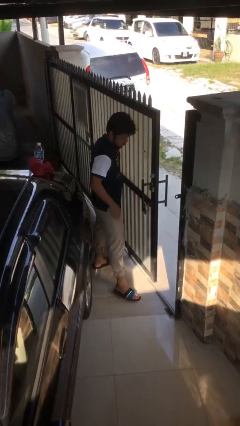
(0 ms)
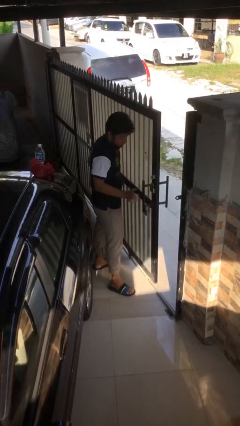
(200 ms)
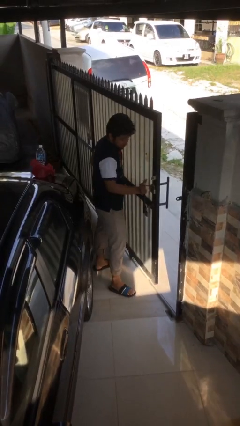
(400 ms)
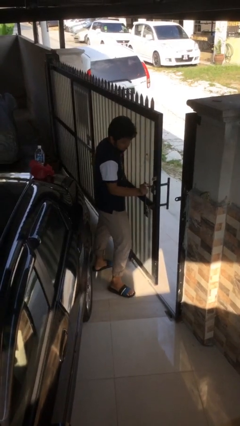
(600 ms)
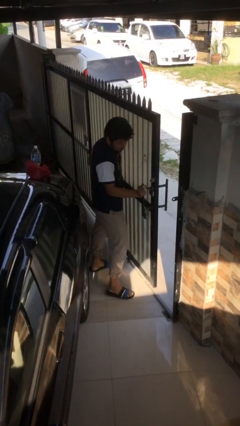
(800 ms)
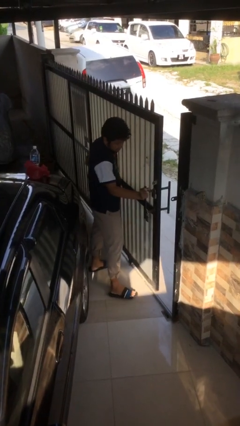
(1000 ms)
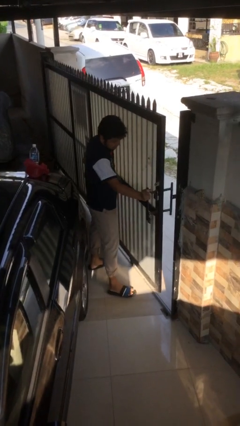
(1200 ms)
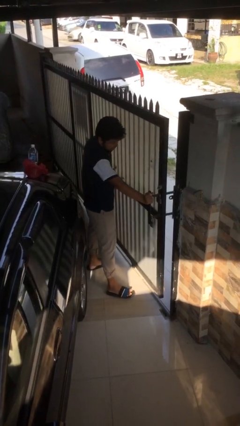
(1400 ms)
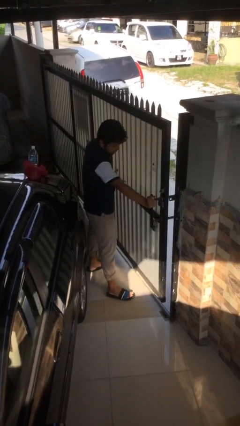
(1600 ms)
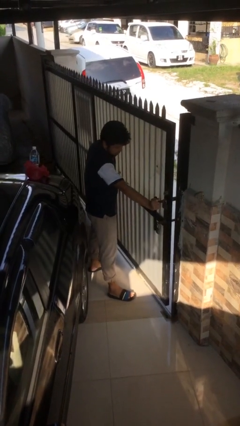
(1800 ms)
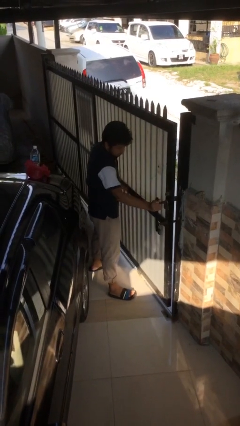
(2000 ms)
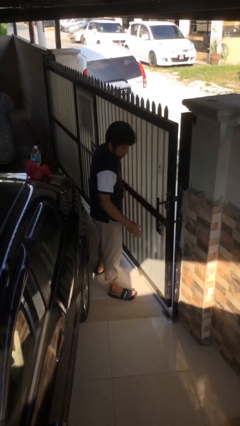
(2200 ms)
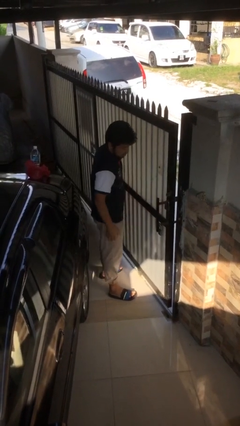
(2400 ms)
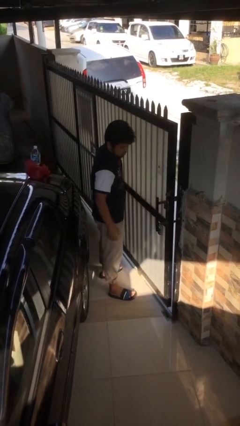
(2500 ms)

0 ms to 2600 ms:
person closes sliding door

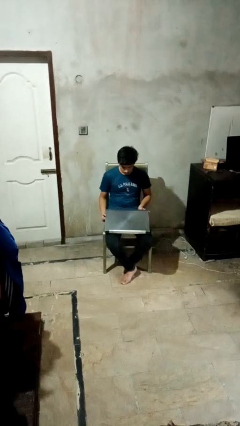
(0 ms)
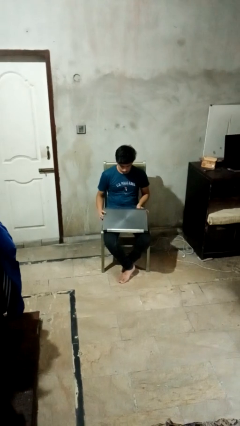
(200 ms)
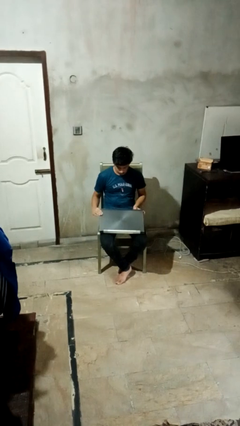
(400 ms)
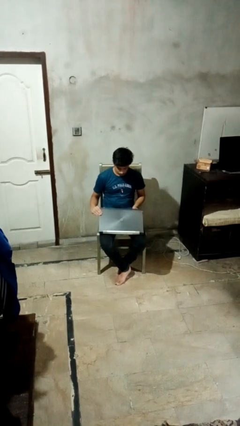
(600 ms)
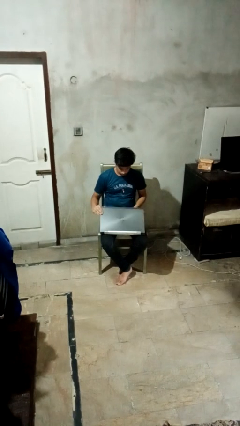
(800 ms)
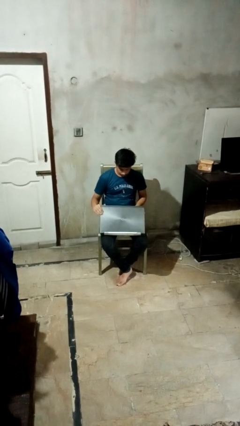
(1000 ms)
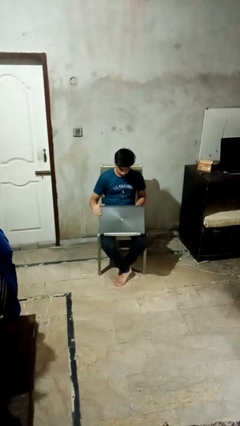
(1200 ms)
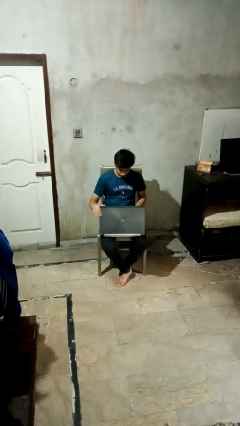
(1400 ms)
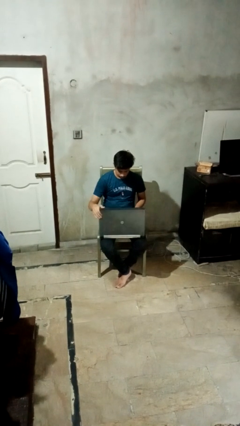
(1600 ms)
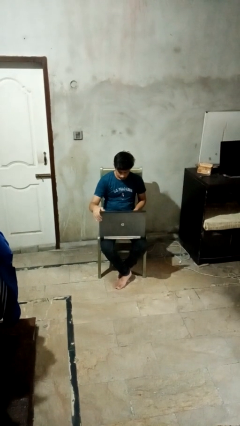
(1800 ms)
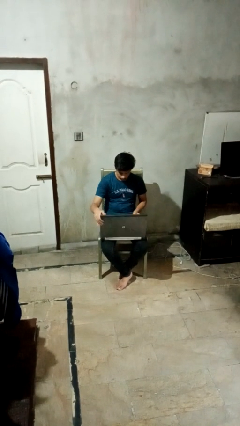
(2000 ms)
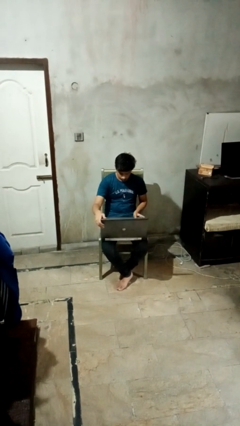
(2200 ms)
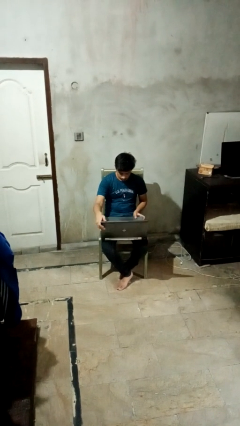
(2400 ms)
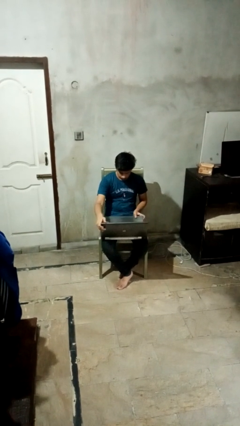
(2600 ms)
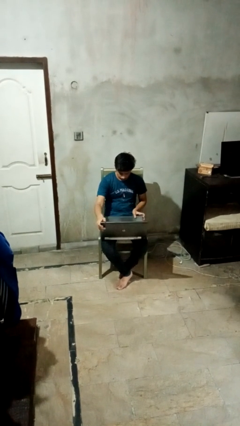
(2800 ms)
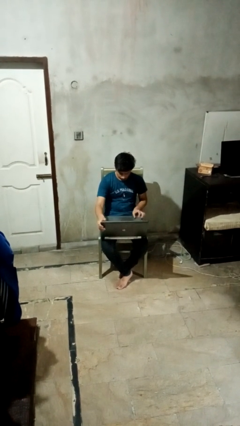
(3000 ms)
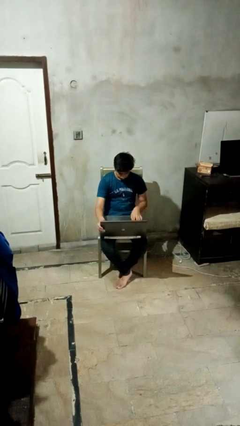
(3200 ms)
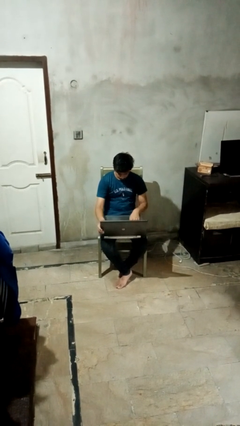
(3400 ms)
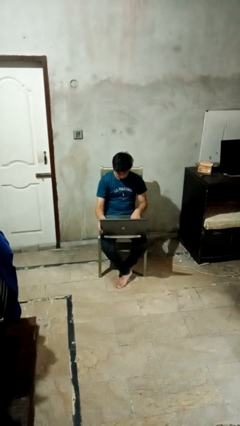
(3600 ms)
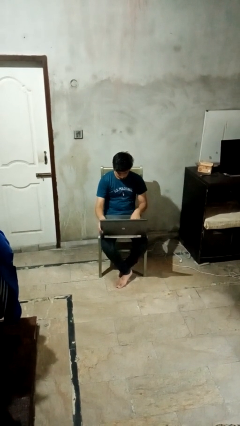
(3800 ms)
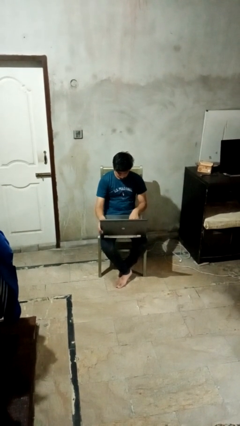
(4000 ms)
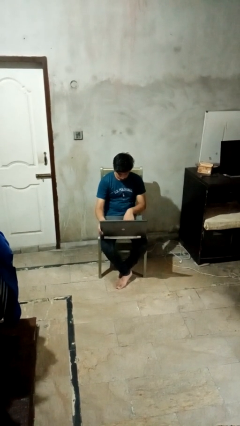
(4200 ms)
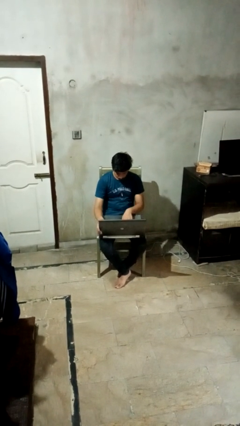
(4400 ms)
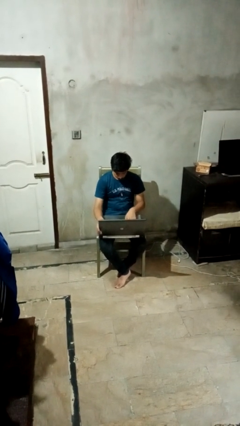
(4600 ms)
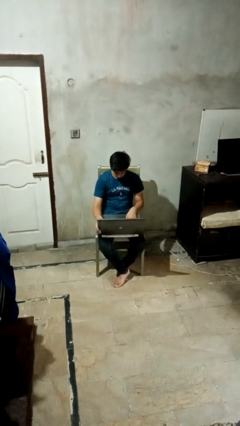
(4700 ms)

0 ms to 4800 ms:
person opens laptop

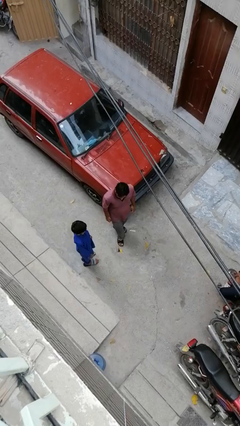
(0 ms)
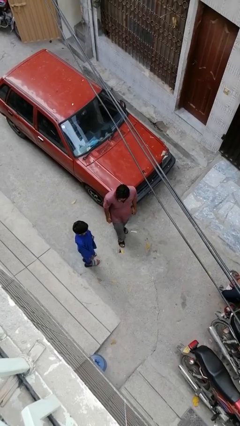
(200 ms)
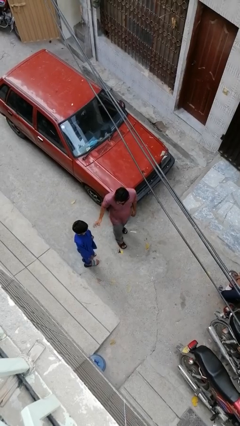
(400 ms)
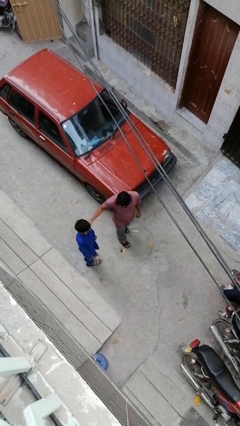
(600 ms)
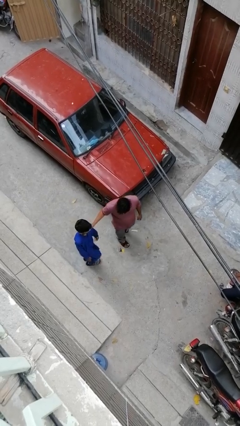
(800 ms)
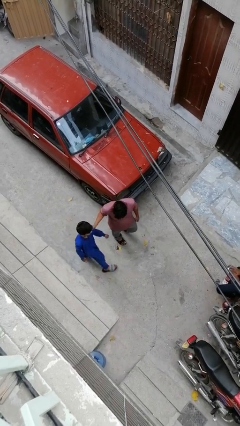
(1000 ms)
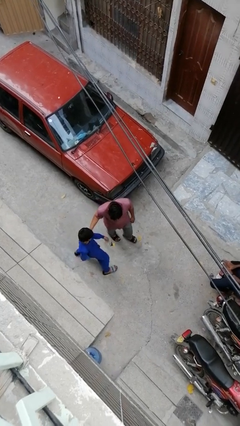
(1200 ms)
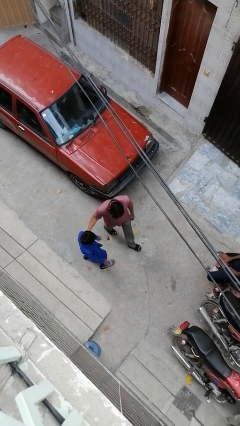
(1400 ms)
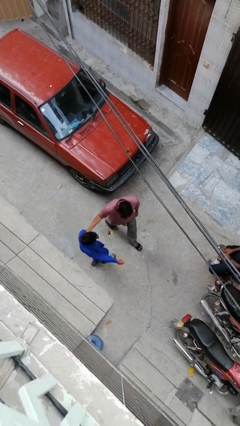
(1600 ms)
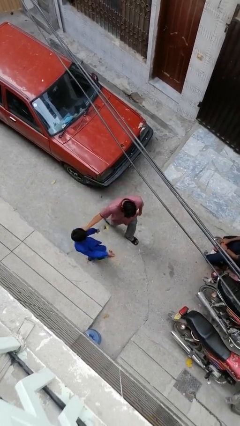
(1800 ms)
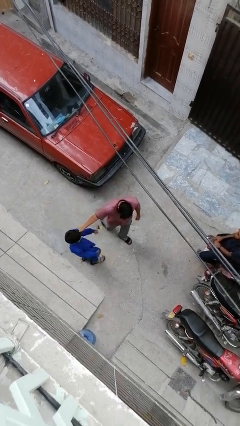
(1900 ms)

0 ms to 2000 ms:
person grabs person by bicep

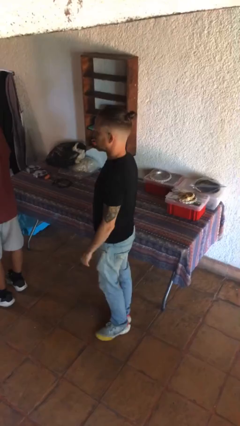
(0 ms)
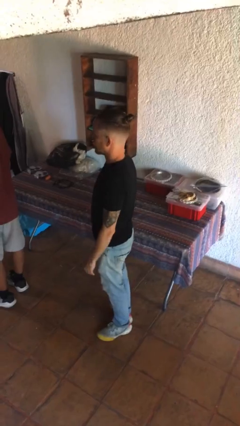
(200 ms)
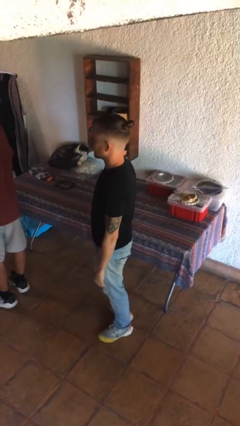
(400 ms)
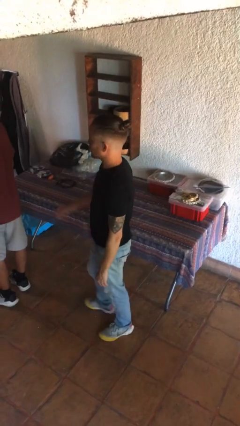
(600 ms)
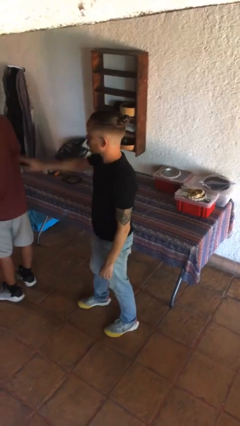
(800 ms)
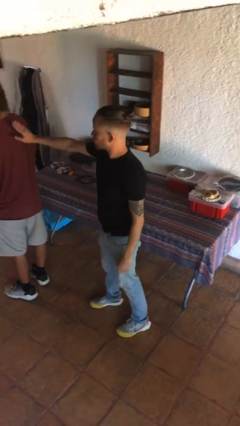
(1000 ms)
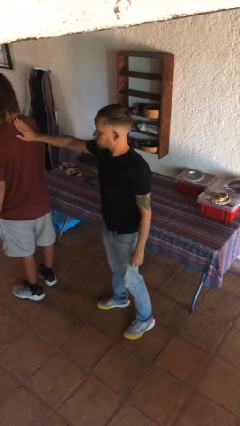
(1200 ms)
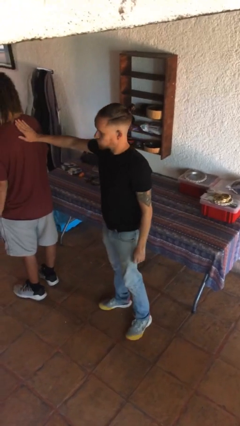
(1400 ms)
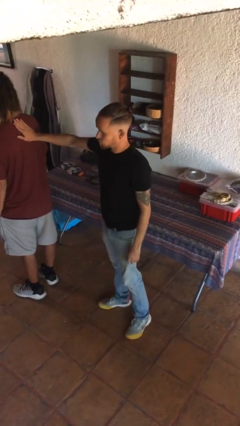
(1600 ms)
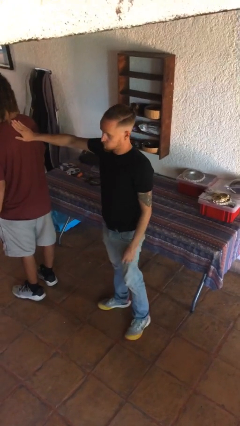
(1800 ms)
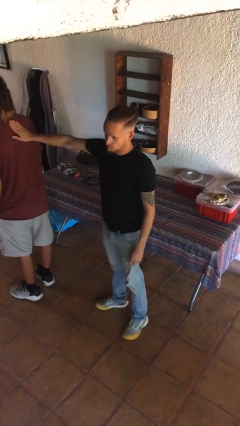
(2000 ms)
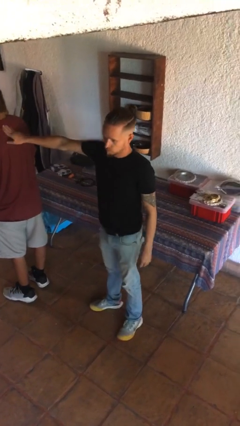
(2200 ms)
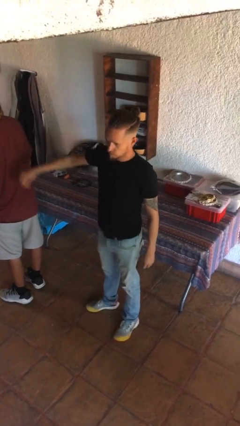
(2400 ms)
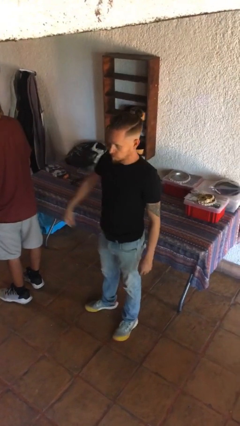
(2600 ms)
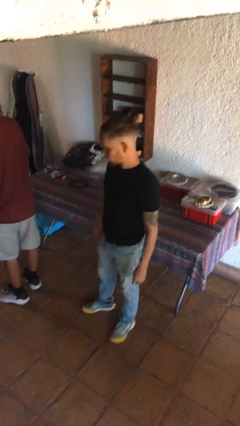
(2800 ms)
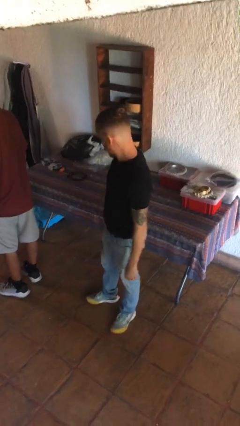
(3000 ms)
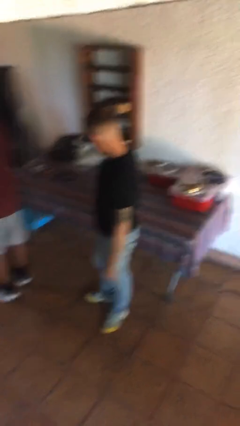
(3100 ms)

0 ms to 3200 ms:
person touches back of person

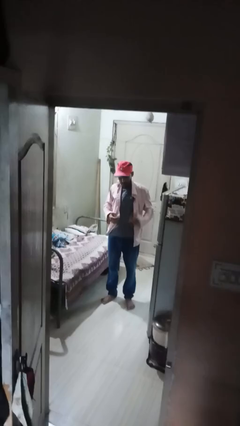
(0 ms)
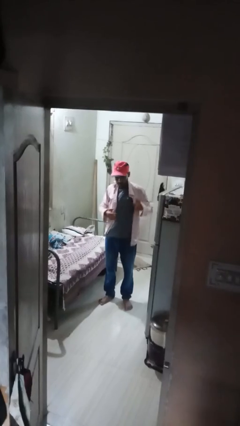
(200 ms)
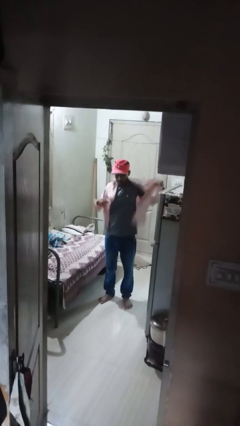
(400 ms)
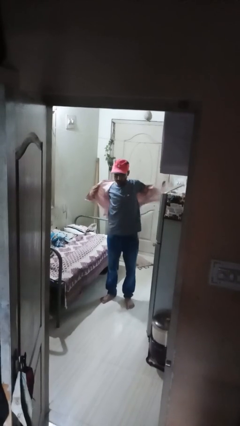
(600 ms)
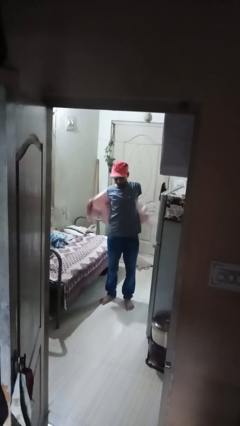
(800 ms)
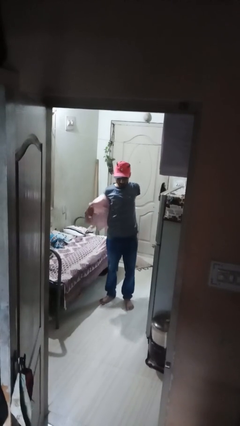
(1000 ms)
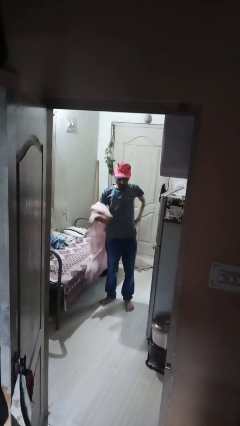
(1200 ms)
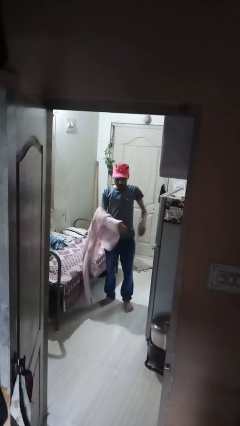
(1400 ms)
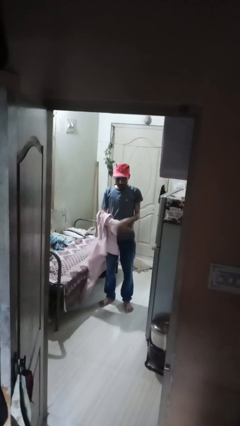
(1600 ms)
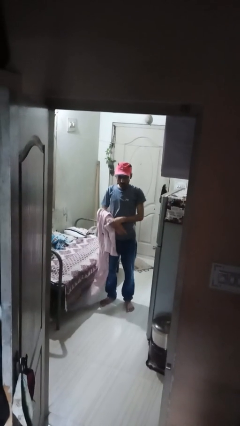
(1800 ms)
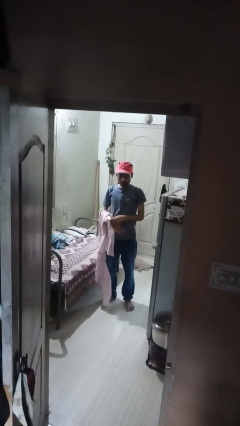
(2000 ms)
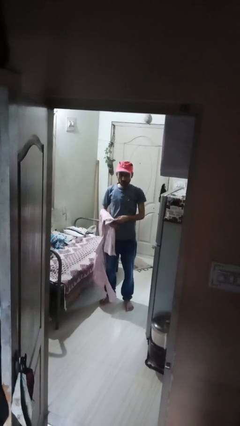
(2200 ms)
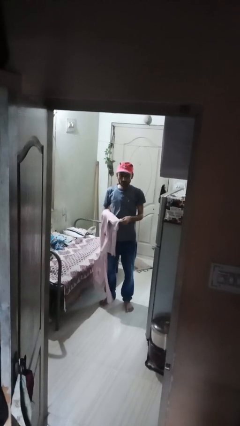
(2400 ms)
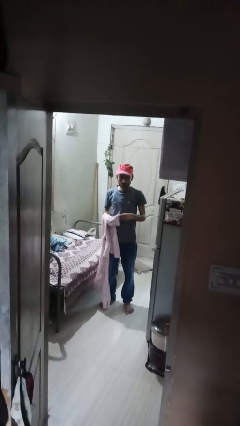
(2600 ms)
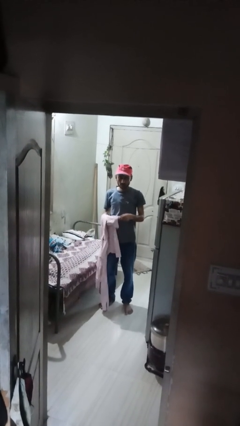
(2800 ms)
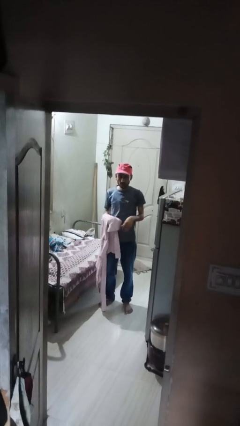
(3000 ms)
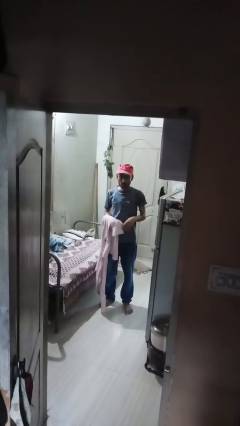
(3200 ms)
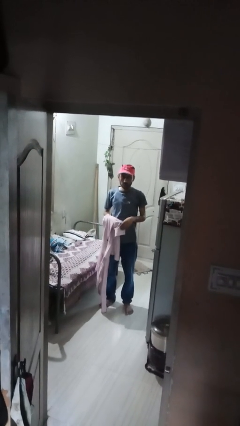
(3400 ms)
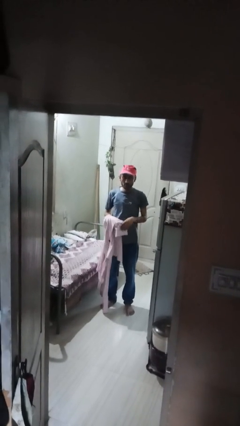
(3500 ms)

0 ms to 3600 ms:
person takes off shirt

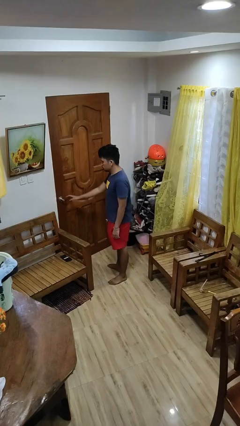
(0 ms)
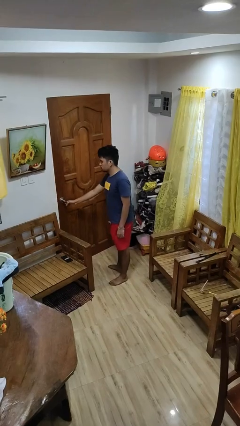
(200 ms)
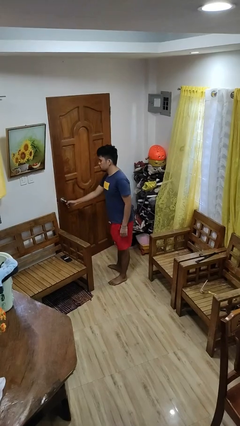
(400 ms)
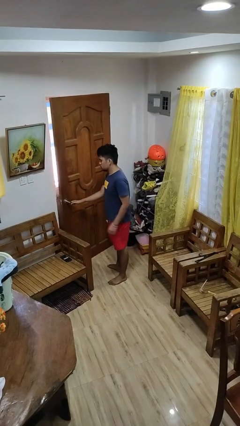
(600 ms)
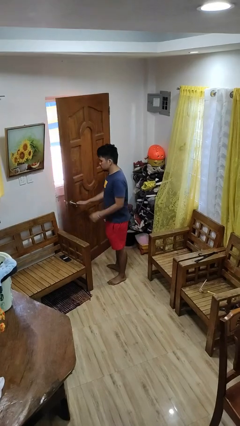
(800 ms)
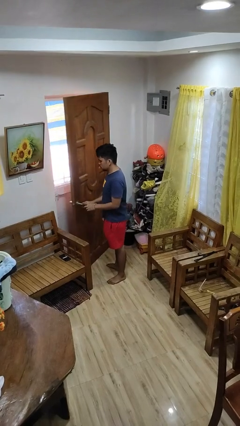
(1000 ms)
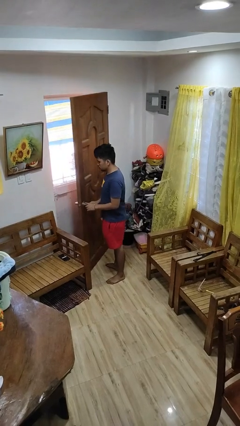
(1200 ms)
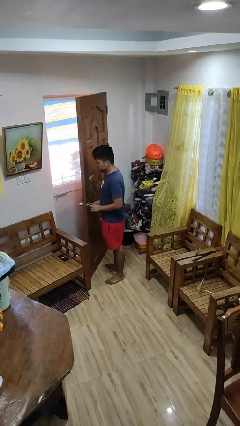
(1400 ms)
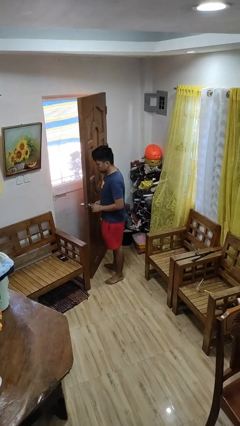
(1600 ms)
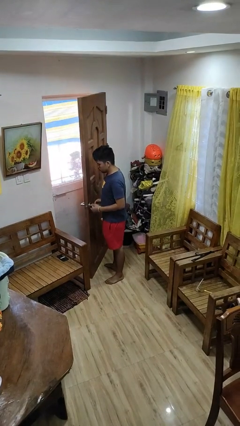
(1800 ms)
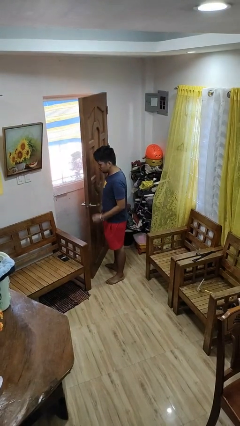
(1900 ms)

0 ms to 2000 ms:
person opens facility door
